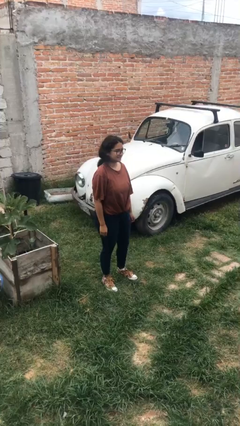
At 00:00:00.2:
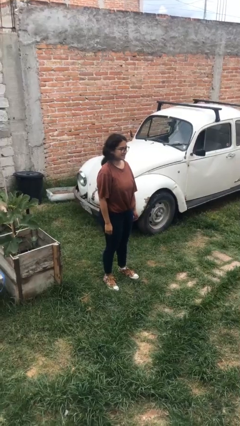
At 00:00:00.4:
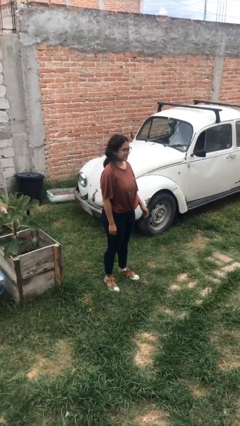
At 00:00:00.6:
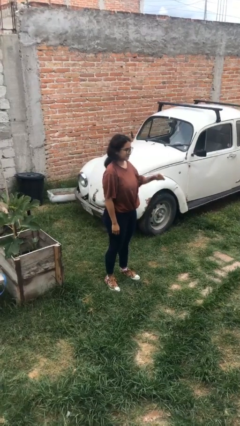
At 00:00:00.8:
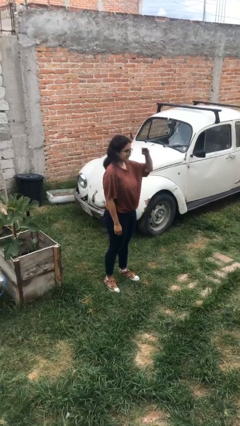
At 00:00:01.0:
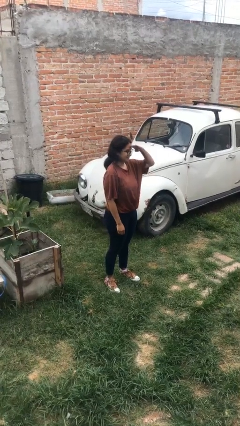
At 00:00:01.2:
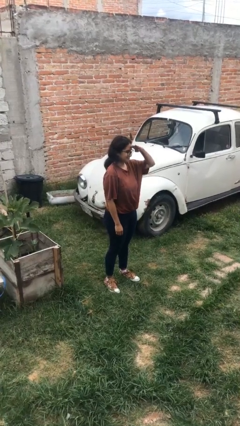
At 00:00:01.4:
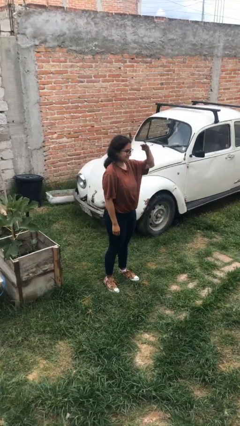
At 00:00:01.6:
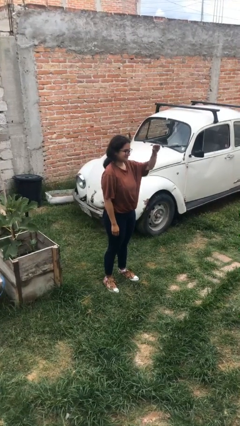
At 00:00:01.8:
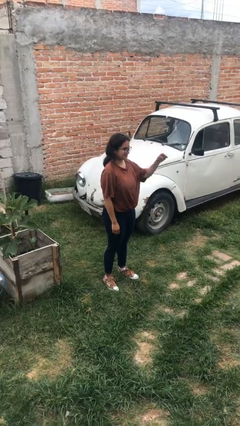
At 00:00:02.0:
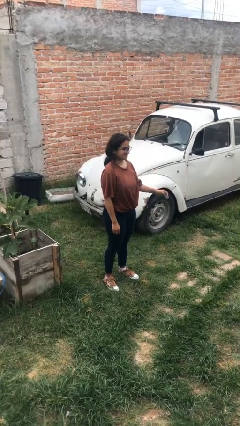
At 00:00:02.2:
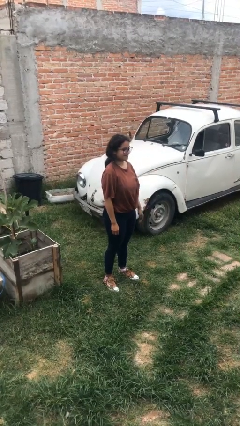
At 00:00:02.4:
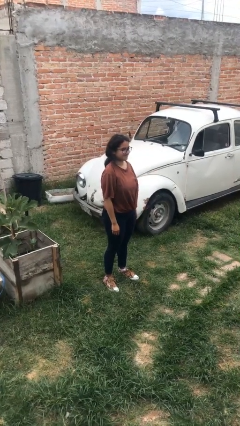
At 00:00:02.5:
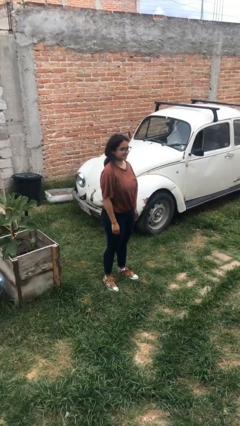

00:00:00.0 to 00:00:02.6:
person salutes

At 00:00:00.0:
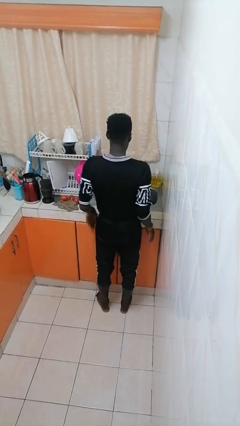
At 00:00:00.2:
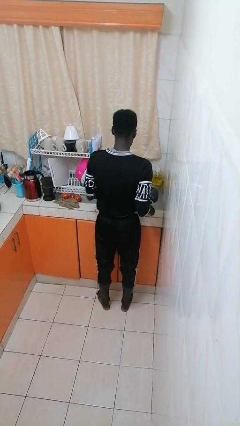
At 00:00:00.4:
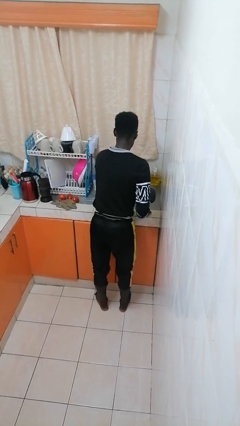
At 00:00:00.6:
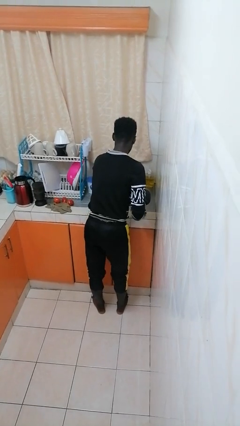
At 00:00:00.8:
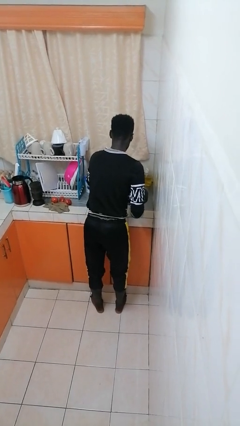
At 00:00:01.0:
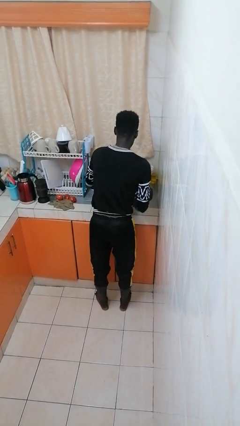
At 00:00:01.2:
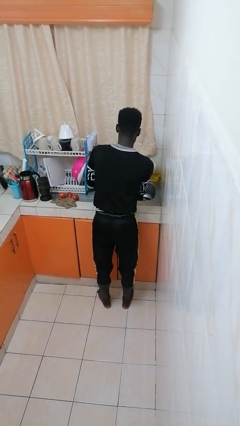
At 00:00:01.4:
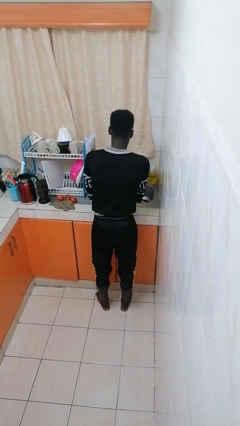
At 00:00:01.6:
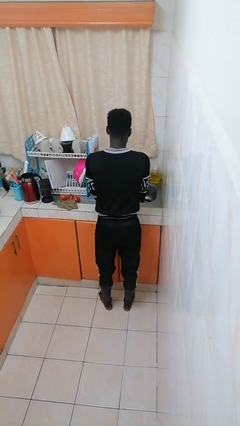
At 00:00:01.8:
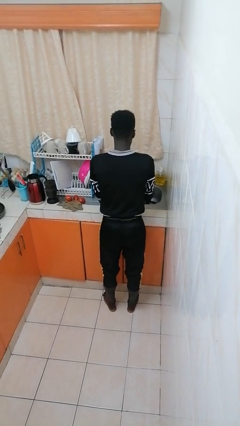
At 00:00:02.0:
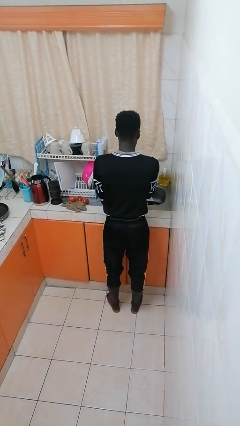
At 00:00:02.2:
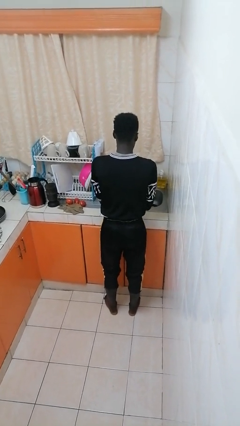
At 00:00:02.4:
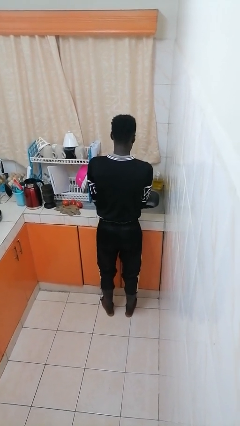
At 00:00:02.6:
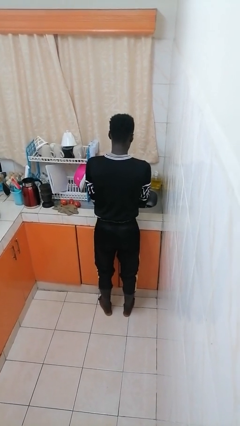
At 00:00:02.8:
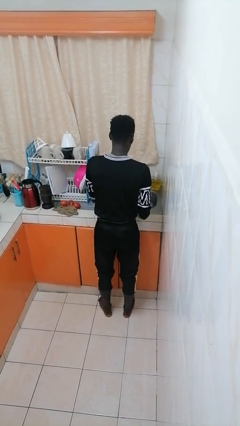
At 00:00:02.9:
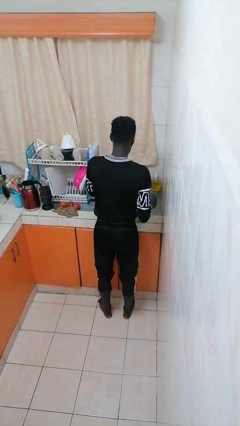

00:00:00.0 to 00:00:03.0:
person washes dish

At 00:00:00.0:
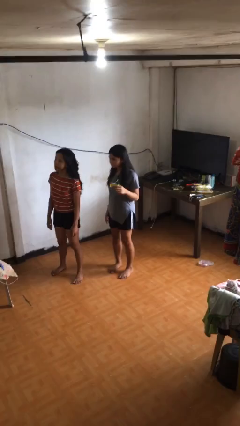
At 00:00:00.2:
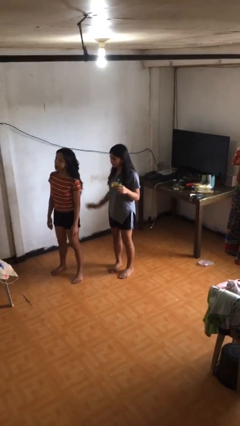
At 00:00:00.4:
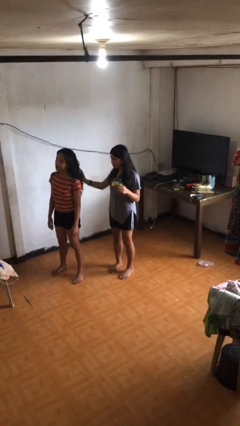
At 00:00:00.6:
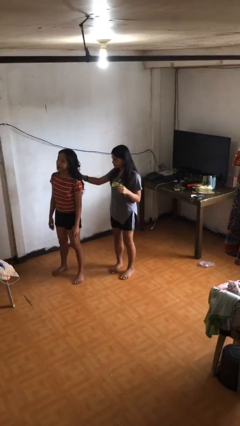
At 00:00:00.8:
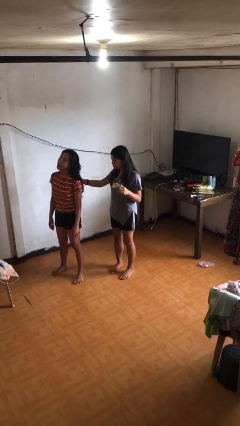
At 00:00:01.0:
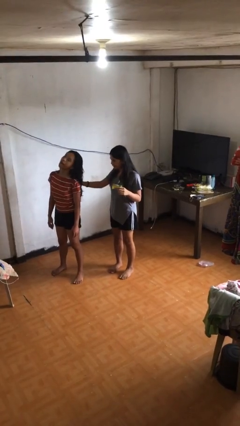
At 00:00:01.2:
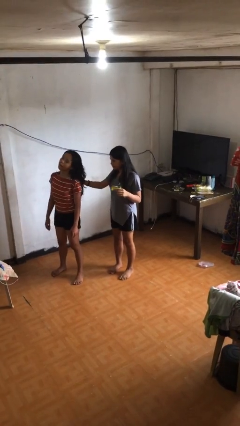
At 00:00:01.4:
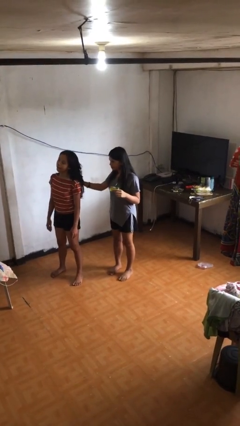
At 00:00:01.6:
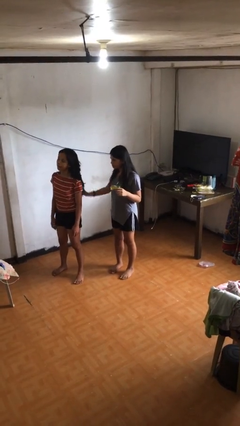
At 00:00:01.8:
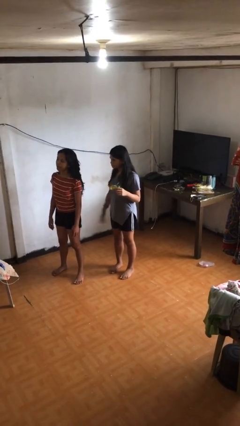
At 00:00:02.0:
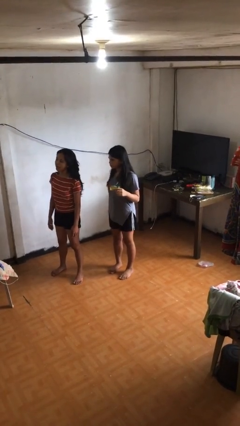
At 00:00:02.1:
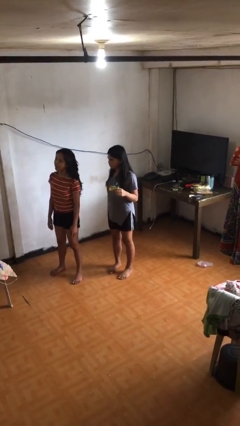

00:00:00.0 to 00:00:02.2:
person grabs person by hair

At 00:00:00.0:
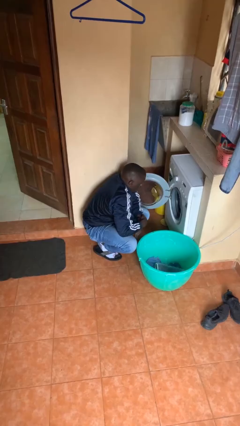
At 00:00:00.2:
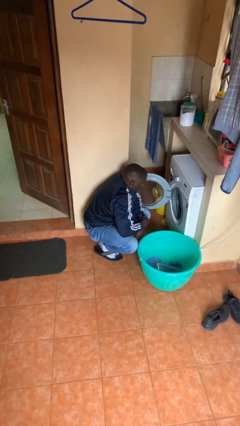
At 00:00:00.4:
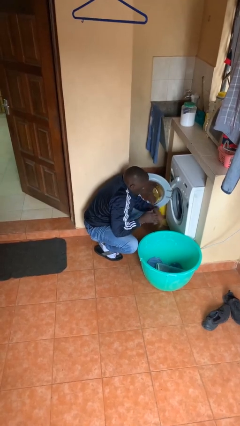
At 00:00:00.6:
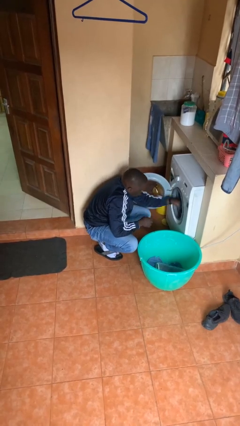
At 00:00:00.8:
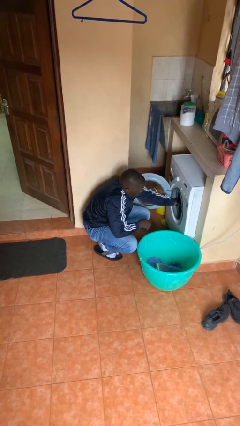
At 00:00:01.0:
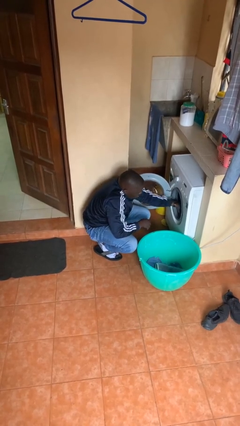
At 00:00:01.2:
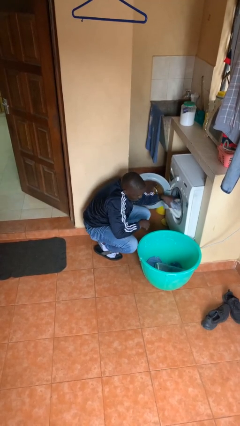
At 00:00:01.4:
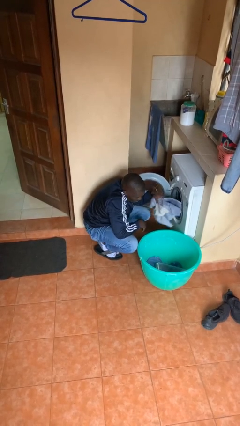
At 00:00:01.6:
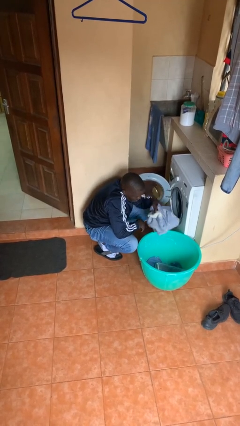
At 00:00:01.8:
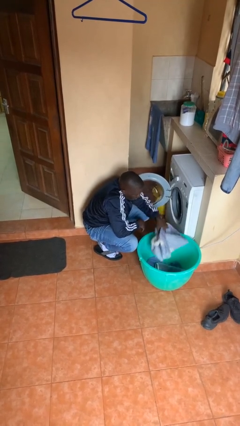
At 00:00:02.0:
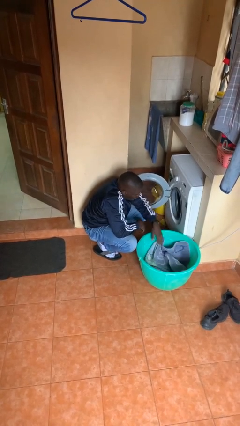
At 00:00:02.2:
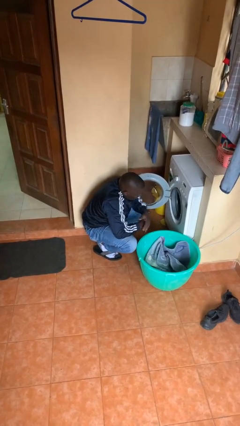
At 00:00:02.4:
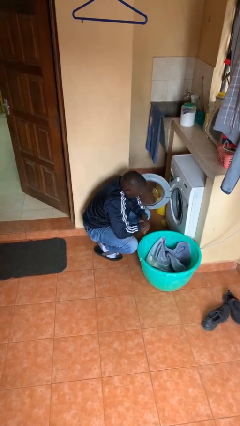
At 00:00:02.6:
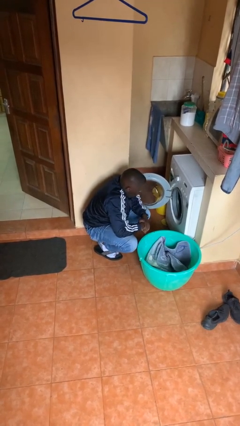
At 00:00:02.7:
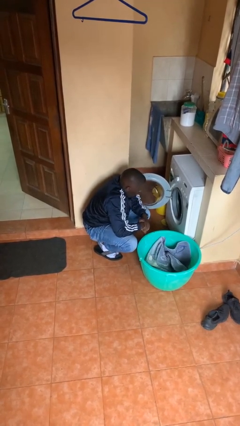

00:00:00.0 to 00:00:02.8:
person loads clotheswasher

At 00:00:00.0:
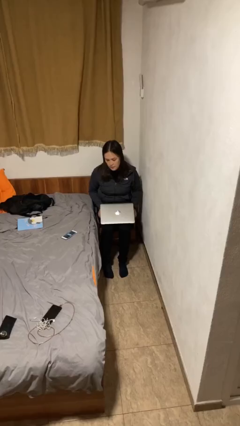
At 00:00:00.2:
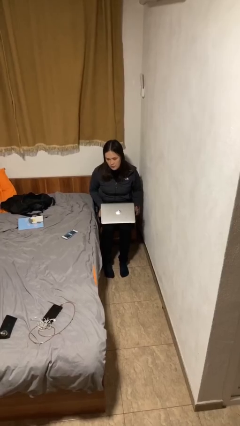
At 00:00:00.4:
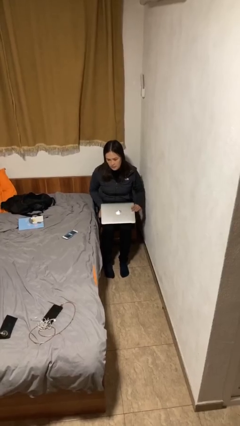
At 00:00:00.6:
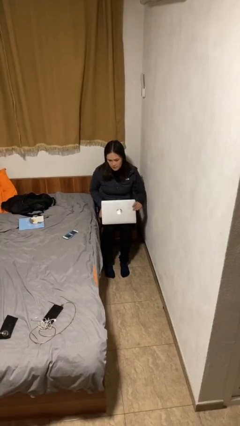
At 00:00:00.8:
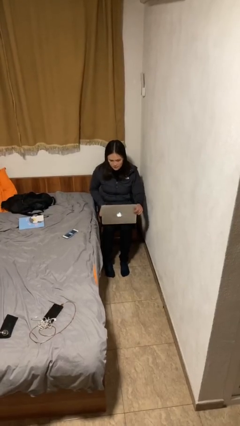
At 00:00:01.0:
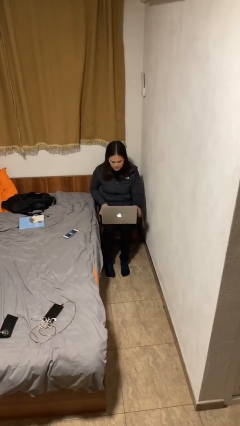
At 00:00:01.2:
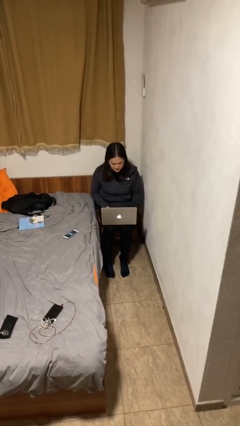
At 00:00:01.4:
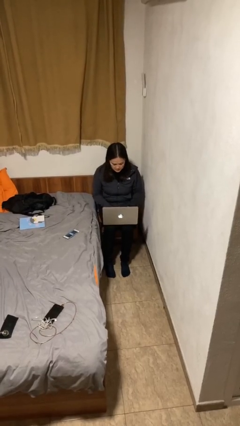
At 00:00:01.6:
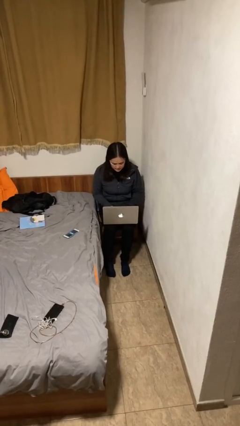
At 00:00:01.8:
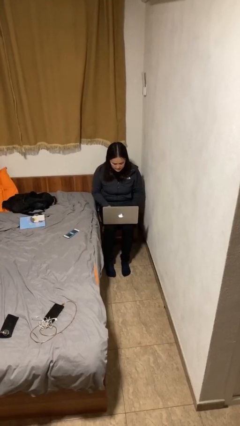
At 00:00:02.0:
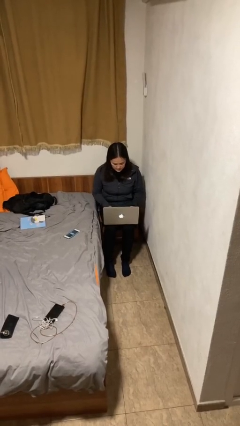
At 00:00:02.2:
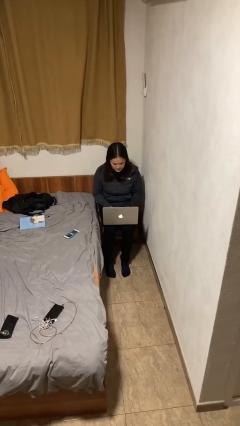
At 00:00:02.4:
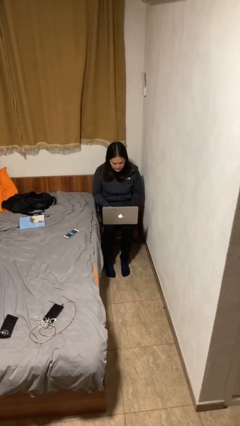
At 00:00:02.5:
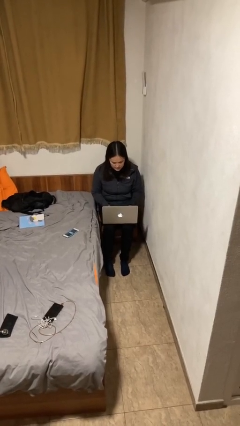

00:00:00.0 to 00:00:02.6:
person interacts with laptop

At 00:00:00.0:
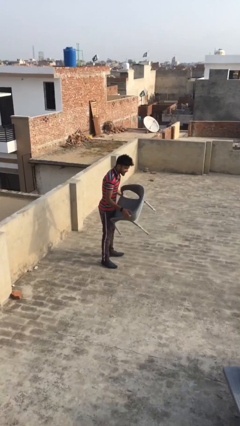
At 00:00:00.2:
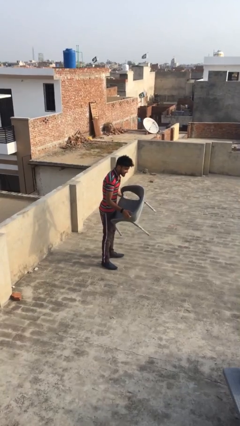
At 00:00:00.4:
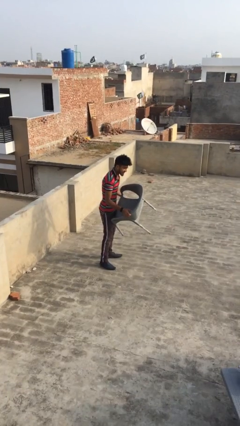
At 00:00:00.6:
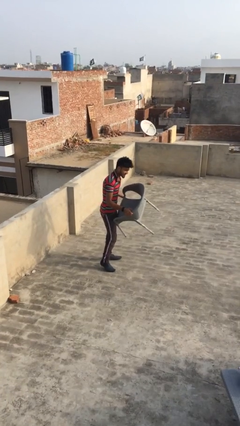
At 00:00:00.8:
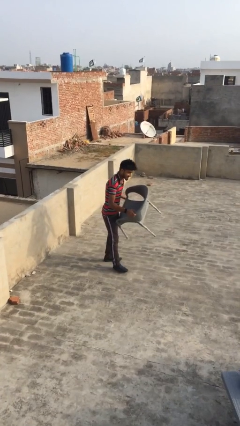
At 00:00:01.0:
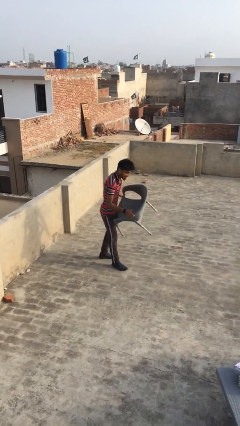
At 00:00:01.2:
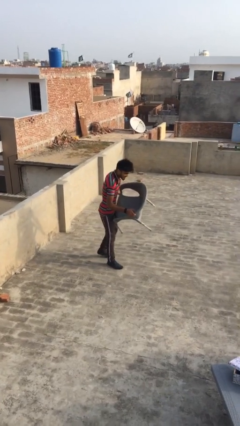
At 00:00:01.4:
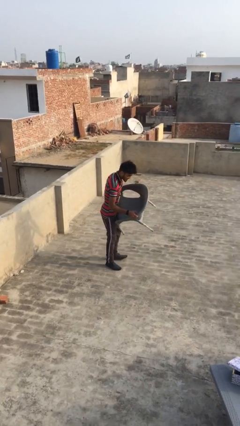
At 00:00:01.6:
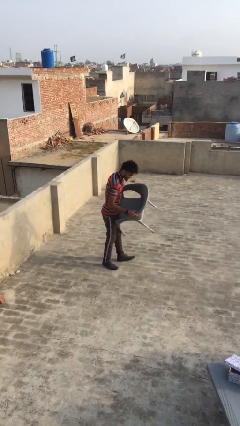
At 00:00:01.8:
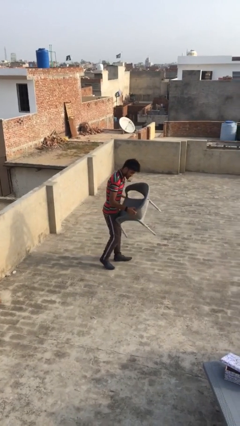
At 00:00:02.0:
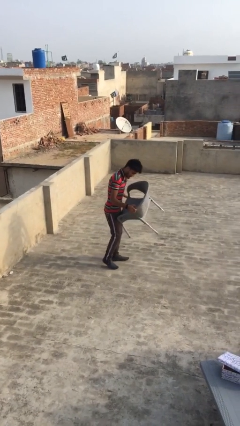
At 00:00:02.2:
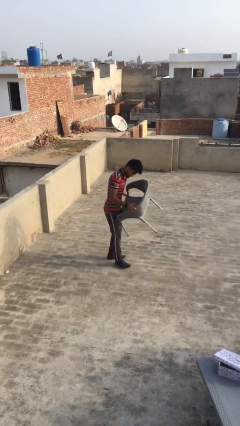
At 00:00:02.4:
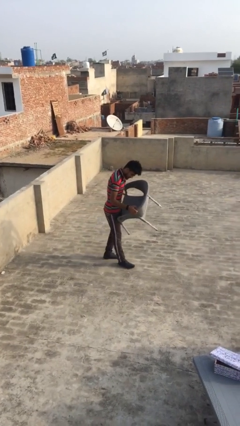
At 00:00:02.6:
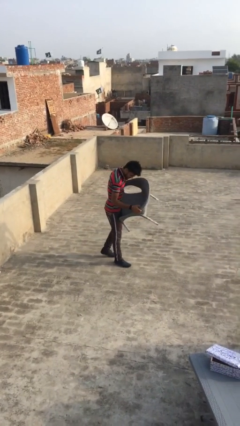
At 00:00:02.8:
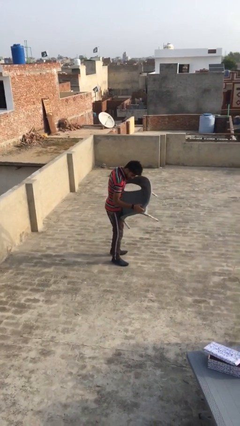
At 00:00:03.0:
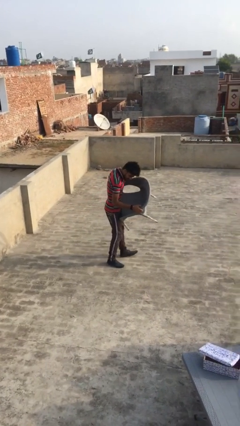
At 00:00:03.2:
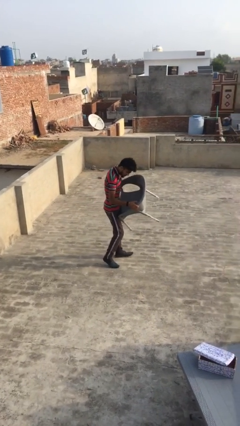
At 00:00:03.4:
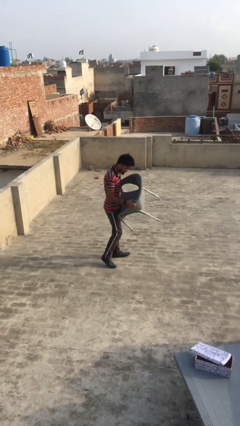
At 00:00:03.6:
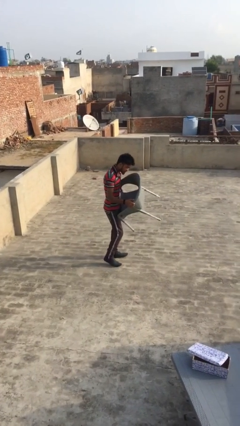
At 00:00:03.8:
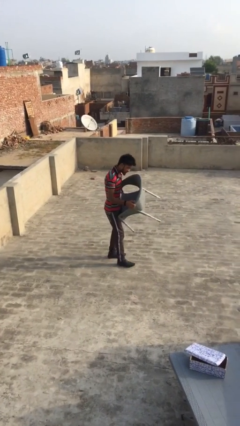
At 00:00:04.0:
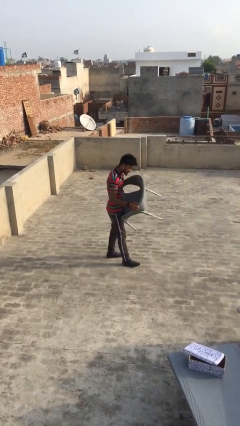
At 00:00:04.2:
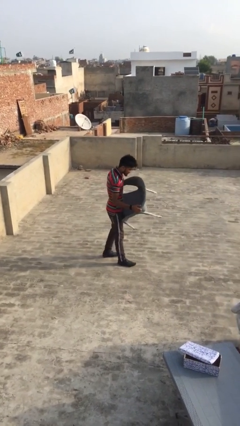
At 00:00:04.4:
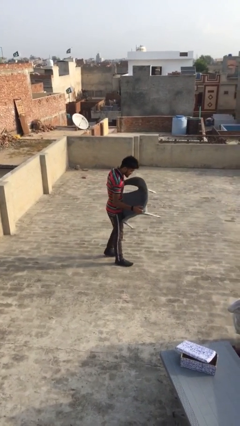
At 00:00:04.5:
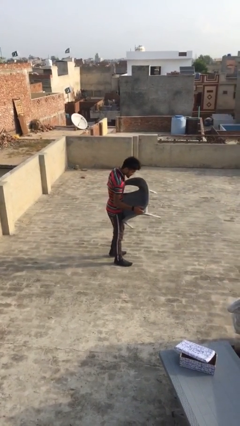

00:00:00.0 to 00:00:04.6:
person carries heavy object
